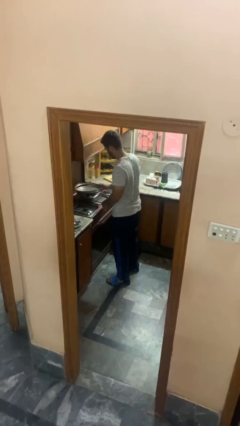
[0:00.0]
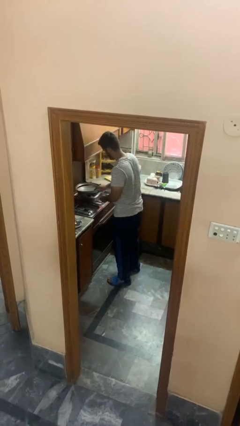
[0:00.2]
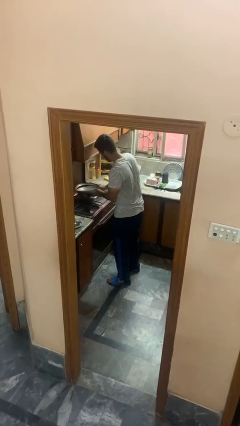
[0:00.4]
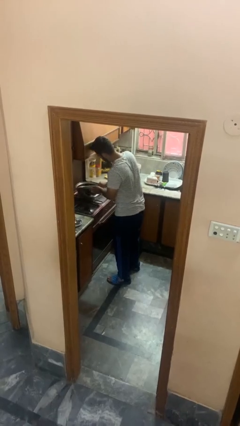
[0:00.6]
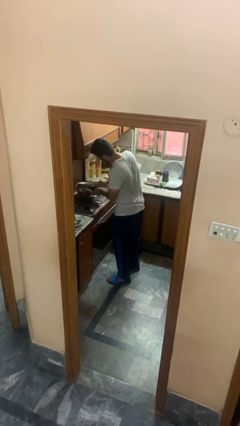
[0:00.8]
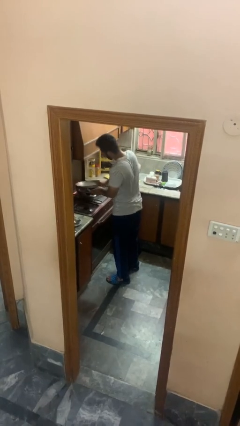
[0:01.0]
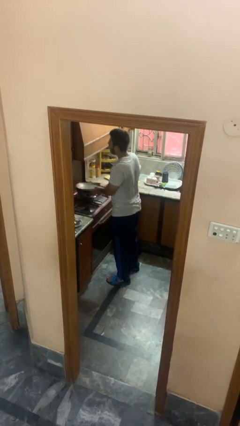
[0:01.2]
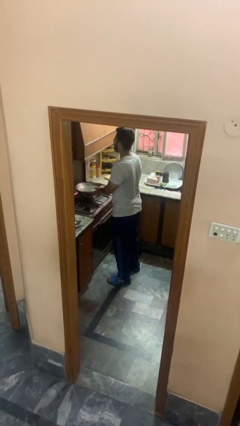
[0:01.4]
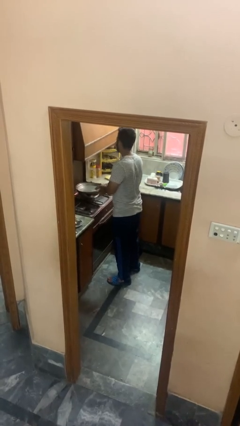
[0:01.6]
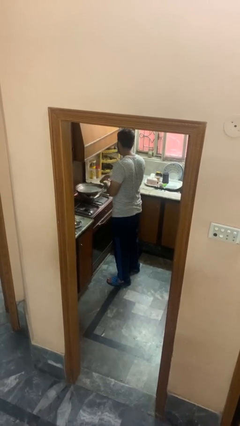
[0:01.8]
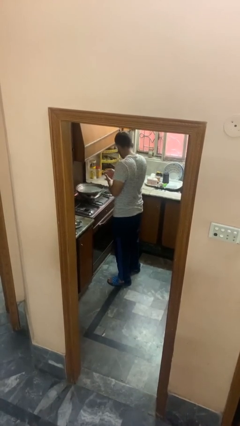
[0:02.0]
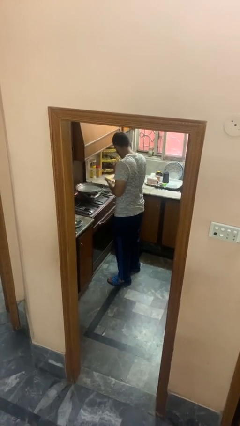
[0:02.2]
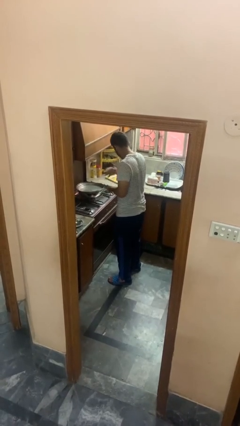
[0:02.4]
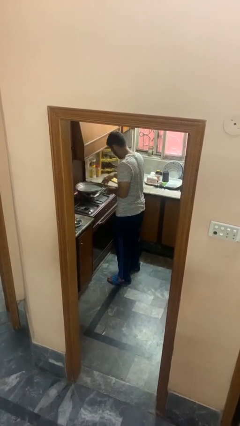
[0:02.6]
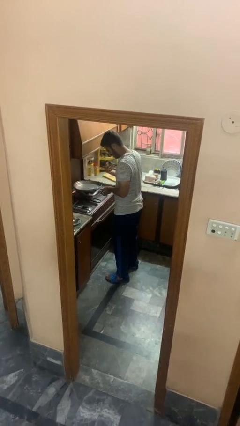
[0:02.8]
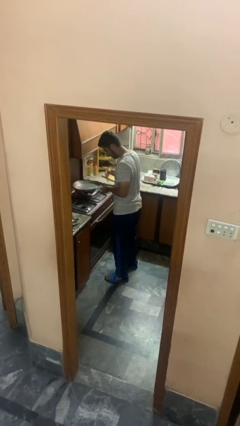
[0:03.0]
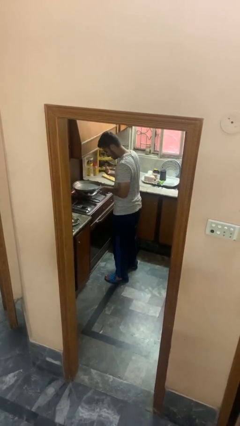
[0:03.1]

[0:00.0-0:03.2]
person burns hand

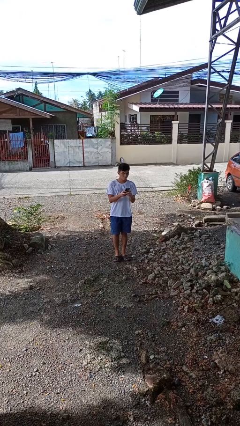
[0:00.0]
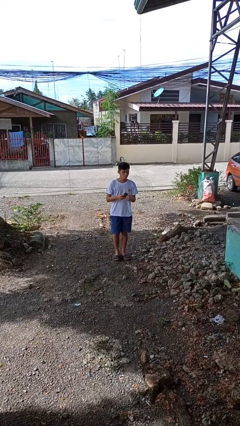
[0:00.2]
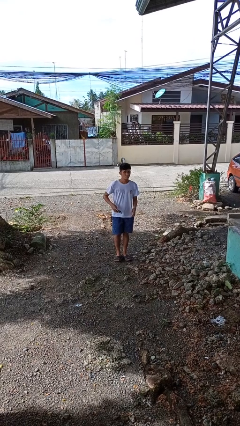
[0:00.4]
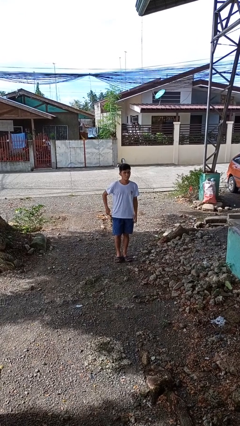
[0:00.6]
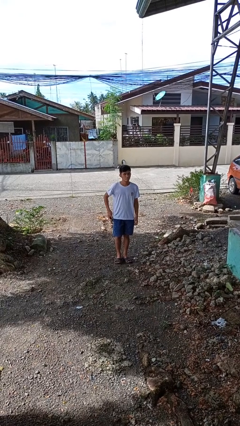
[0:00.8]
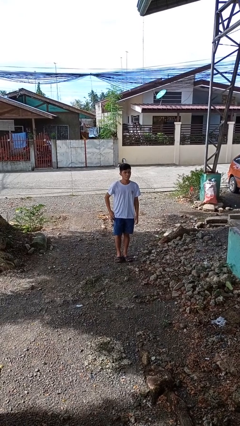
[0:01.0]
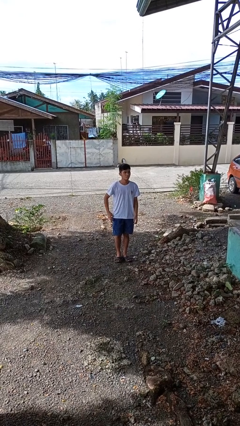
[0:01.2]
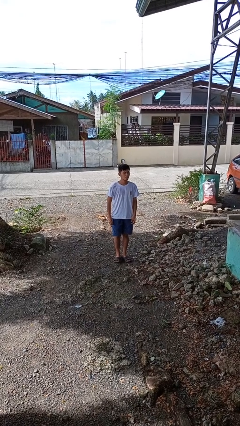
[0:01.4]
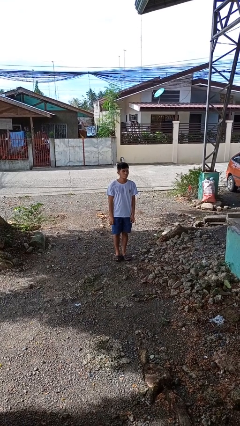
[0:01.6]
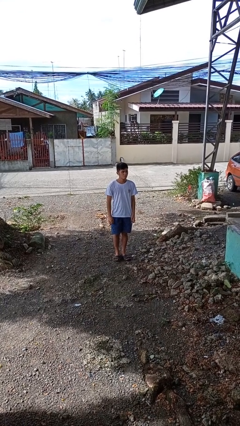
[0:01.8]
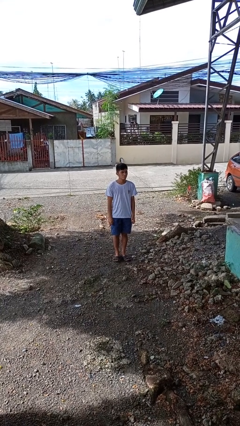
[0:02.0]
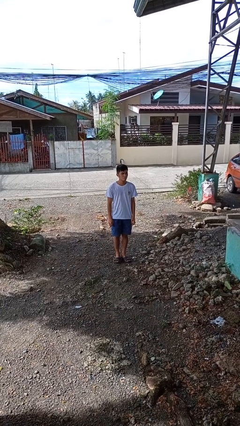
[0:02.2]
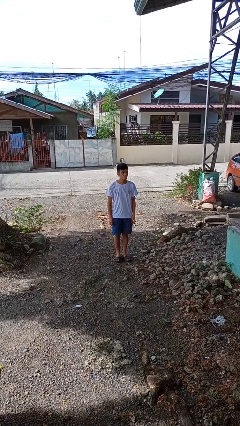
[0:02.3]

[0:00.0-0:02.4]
person puts phone into pocket

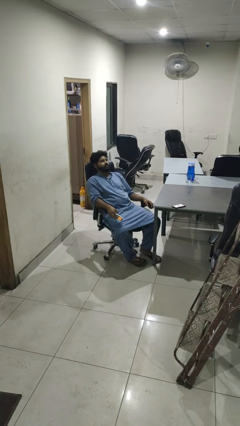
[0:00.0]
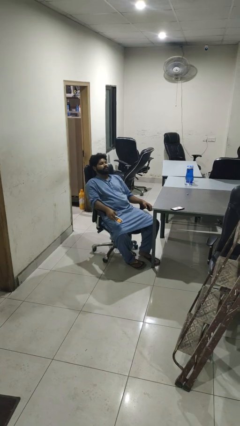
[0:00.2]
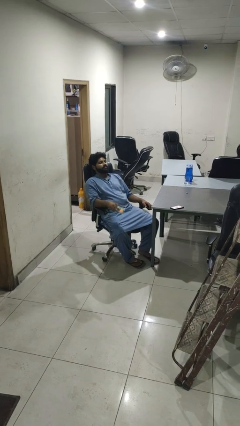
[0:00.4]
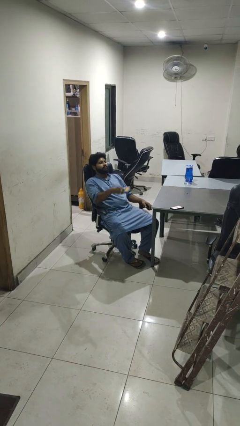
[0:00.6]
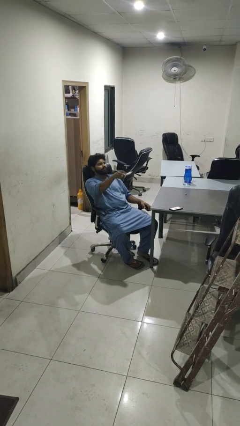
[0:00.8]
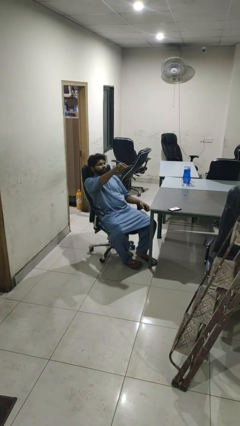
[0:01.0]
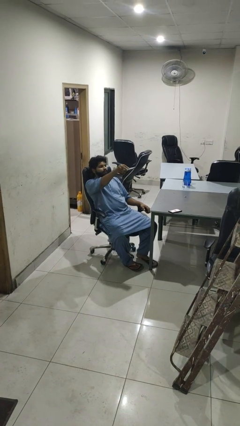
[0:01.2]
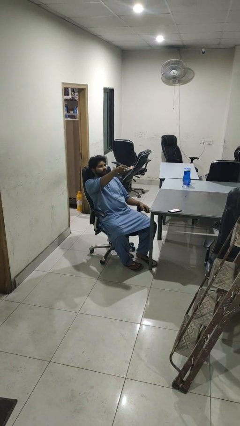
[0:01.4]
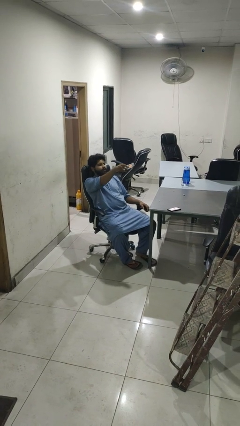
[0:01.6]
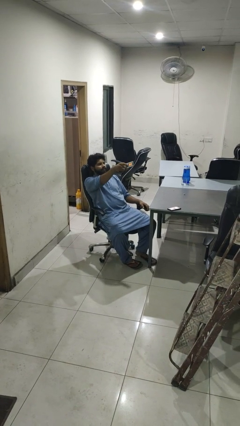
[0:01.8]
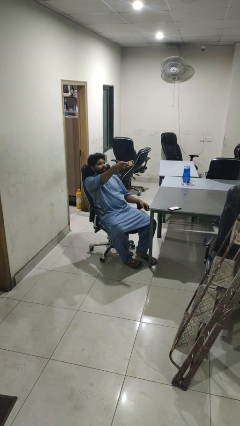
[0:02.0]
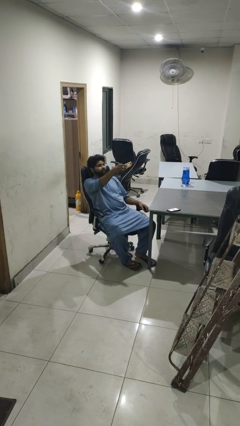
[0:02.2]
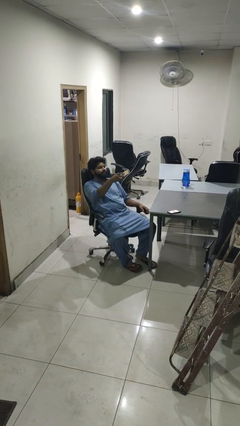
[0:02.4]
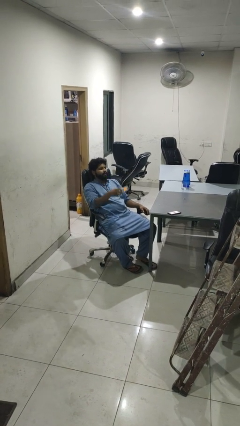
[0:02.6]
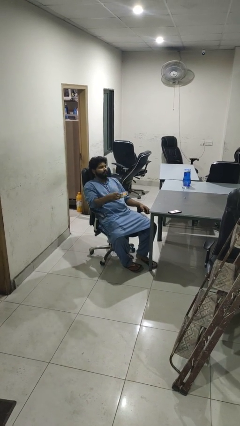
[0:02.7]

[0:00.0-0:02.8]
person uses television remote

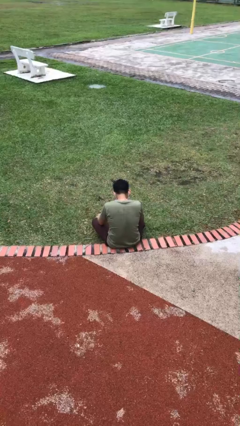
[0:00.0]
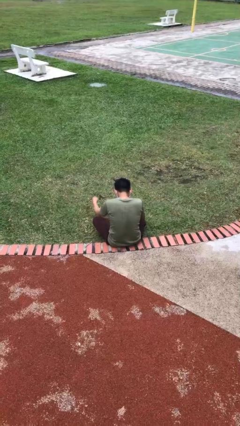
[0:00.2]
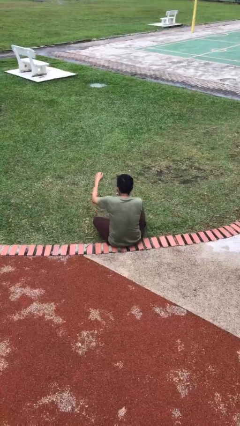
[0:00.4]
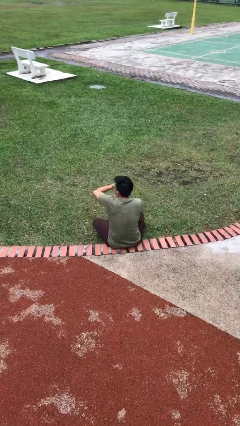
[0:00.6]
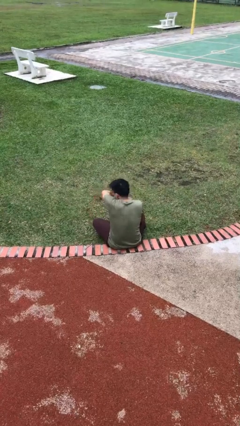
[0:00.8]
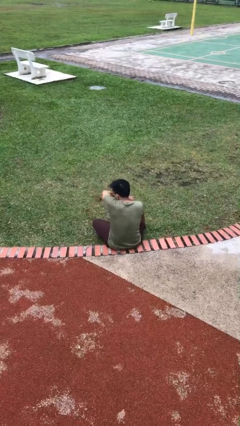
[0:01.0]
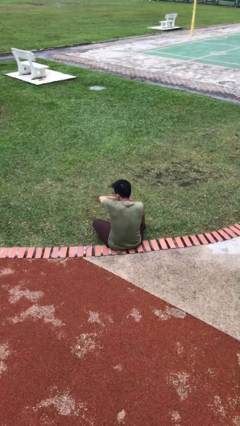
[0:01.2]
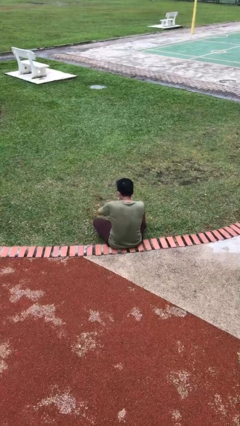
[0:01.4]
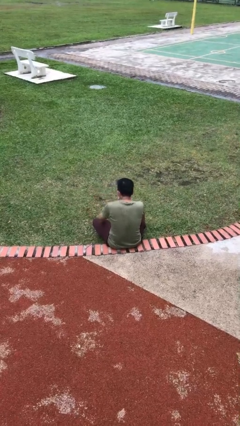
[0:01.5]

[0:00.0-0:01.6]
person sneezes into arm

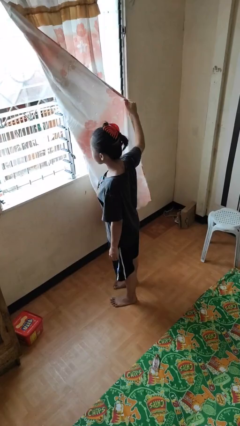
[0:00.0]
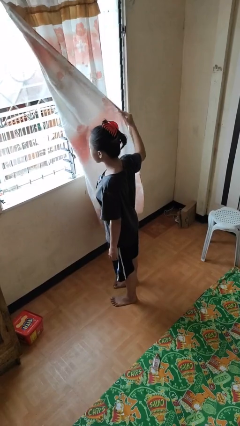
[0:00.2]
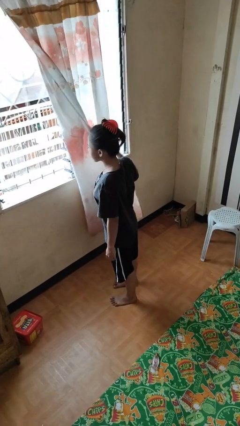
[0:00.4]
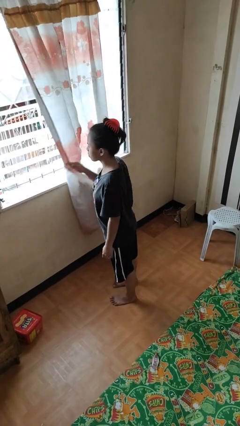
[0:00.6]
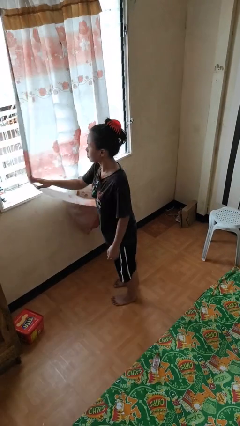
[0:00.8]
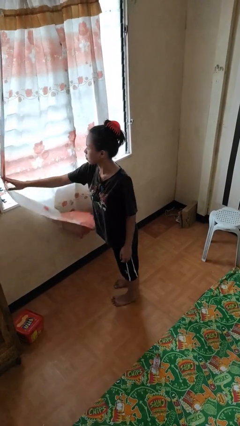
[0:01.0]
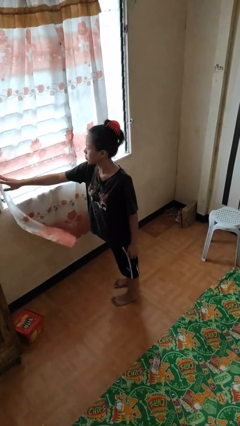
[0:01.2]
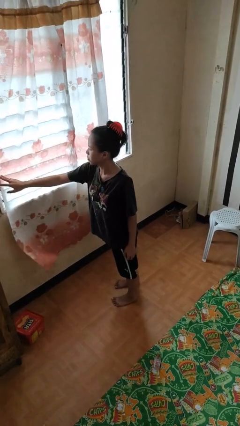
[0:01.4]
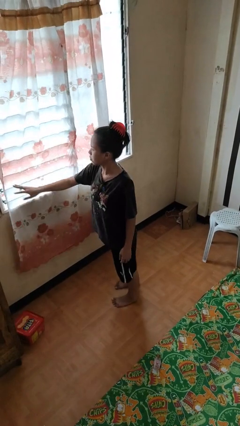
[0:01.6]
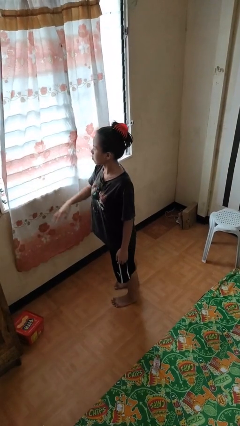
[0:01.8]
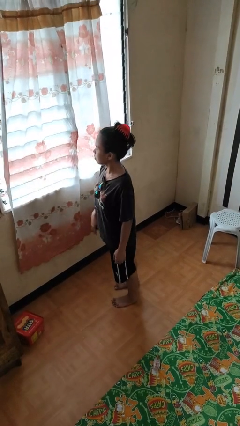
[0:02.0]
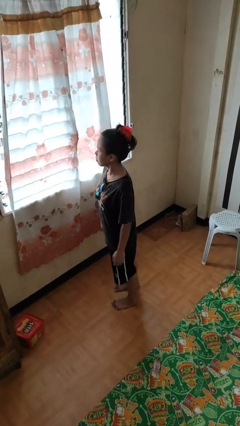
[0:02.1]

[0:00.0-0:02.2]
person closes curtains

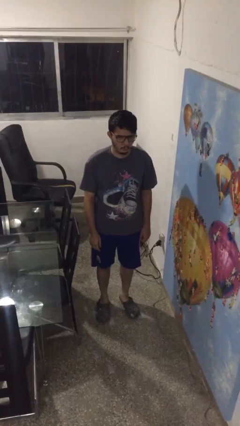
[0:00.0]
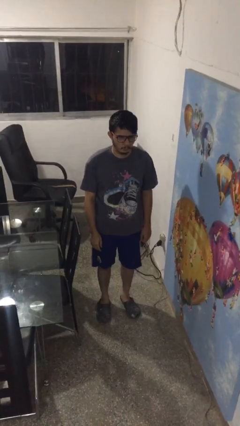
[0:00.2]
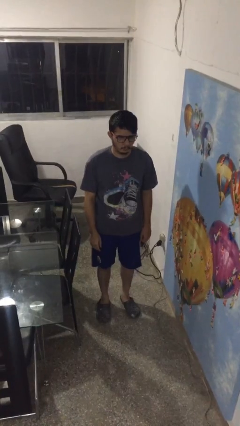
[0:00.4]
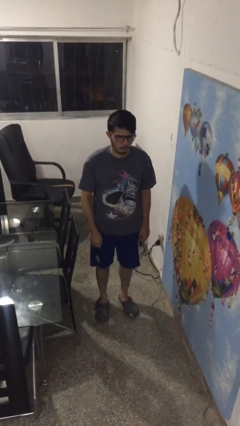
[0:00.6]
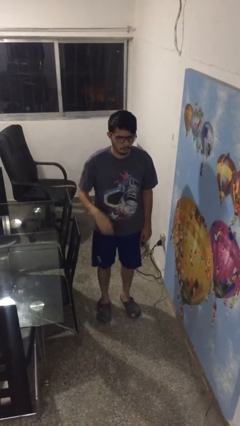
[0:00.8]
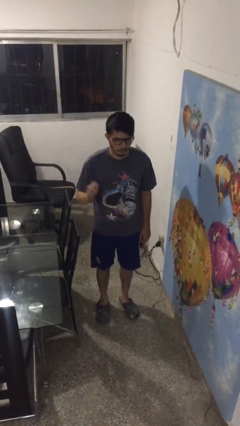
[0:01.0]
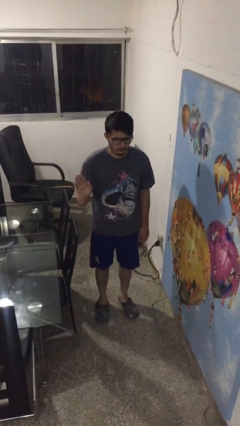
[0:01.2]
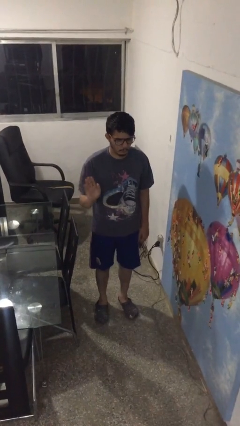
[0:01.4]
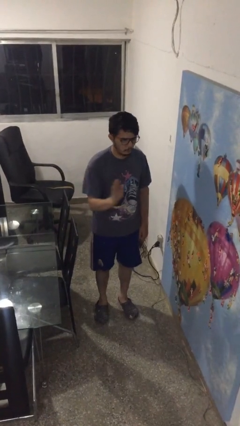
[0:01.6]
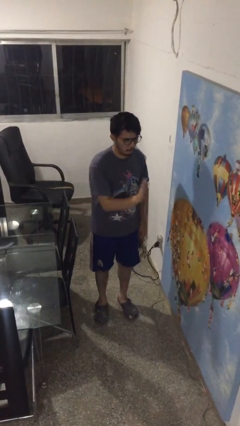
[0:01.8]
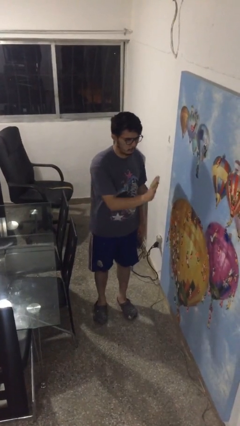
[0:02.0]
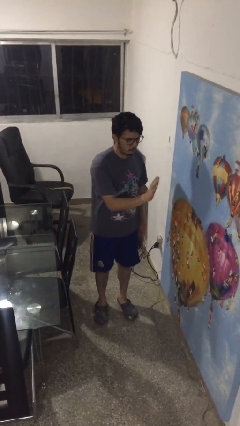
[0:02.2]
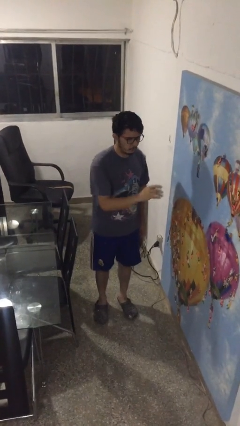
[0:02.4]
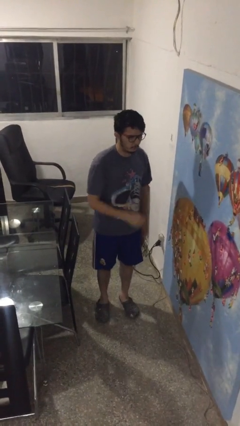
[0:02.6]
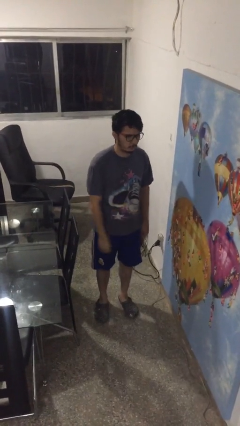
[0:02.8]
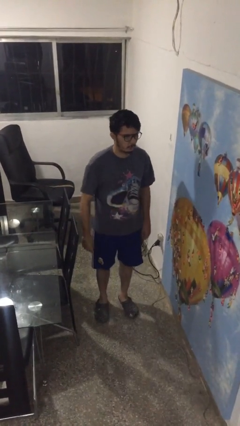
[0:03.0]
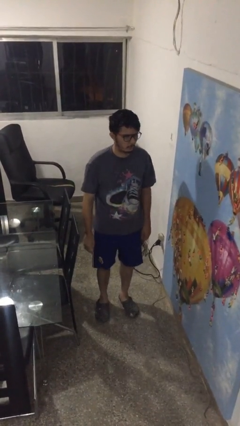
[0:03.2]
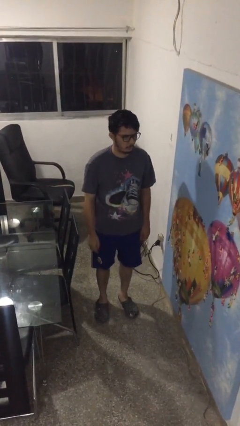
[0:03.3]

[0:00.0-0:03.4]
person gestures swipe left

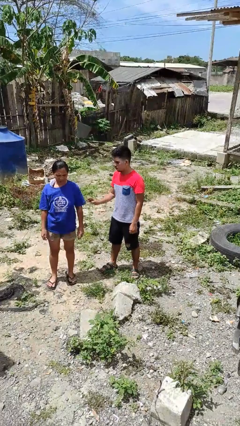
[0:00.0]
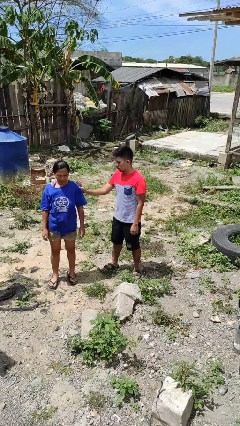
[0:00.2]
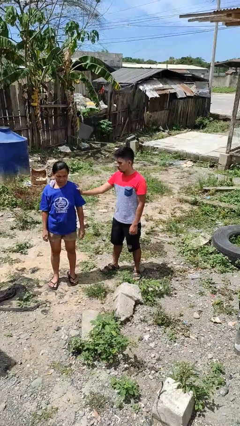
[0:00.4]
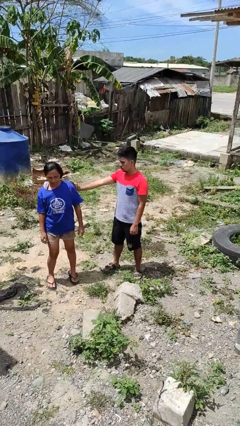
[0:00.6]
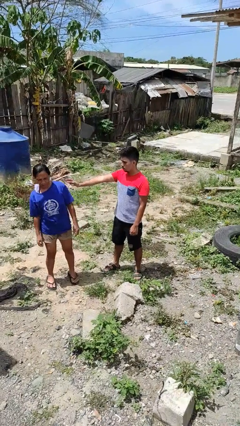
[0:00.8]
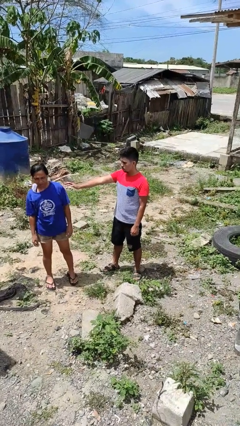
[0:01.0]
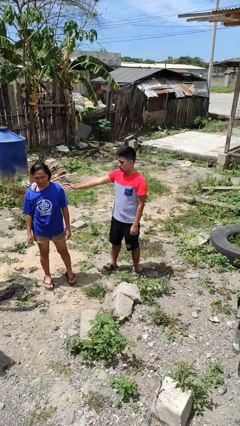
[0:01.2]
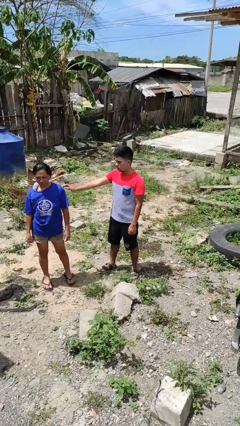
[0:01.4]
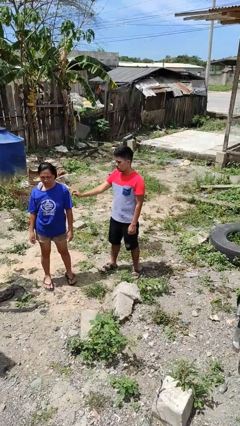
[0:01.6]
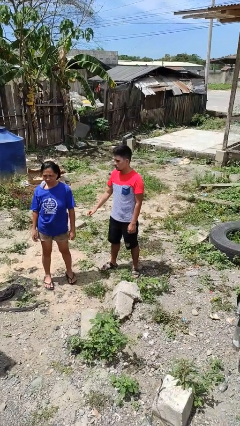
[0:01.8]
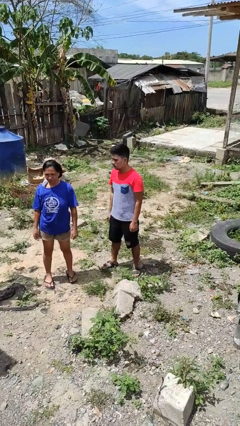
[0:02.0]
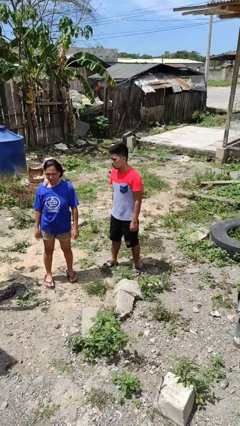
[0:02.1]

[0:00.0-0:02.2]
person shoves person
